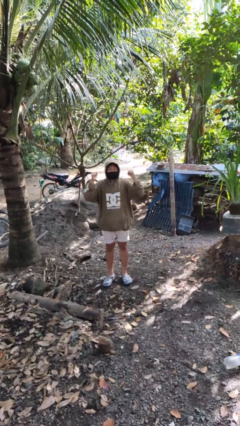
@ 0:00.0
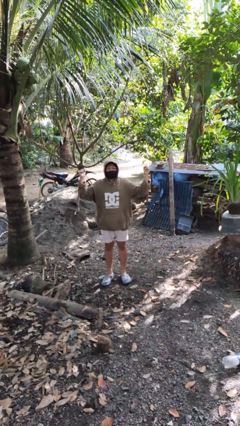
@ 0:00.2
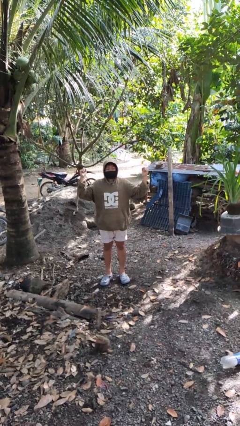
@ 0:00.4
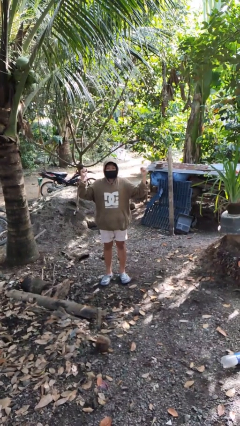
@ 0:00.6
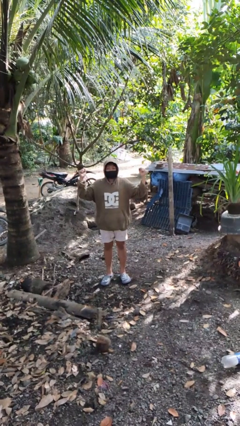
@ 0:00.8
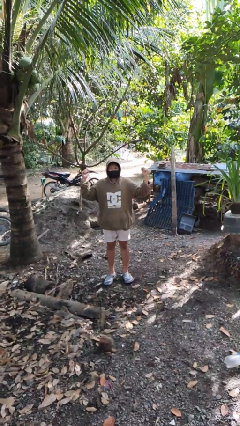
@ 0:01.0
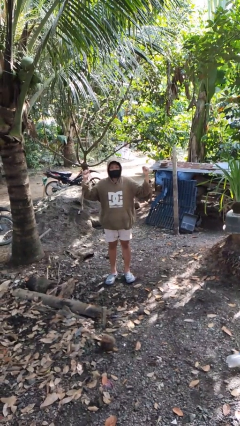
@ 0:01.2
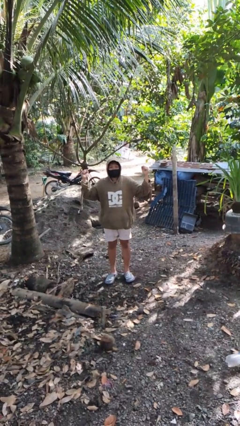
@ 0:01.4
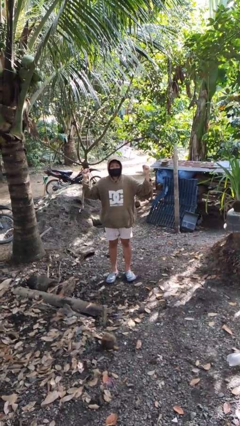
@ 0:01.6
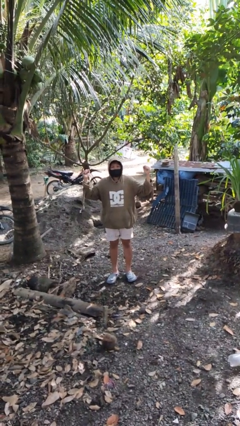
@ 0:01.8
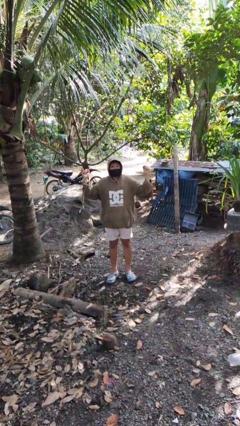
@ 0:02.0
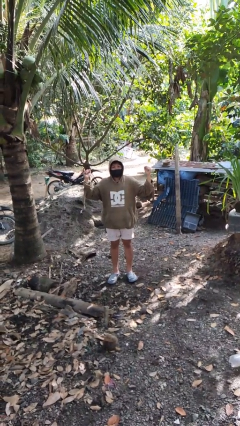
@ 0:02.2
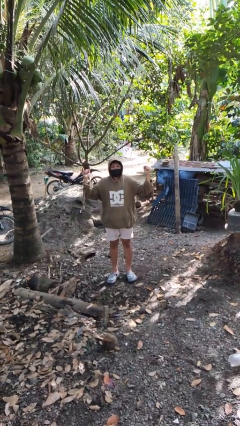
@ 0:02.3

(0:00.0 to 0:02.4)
person gestures zoom out

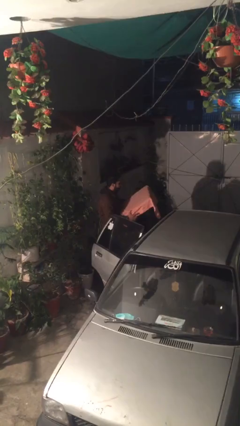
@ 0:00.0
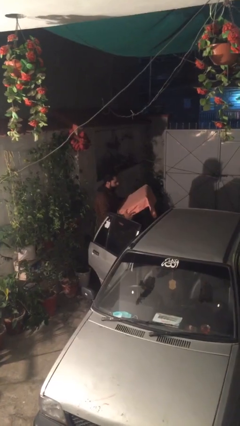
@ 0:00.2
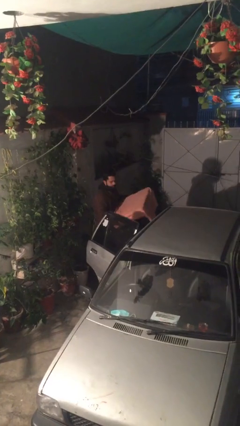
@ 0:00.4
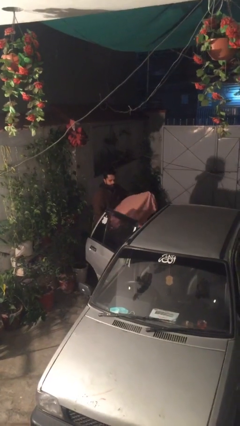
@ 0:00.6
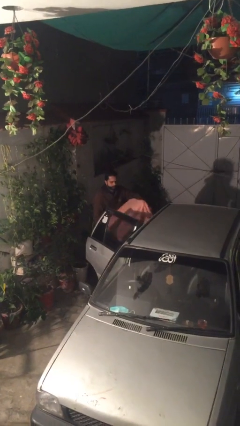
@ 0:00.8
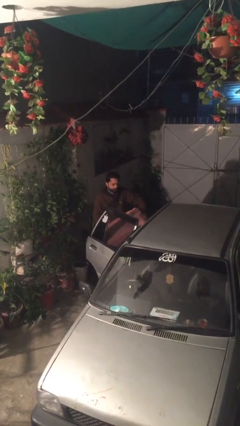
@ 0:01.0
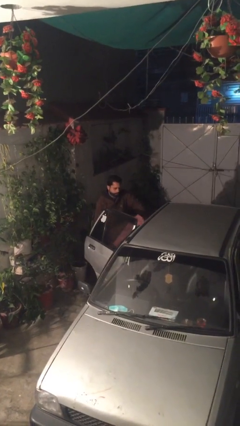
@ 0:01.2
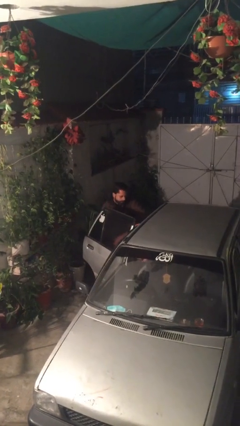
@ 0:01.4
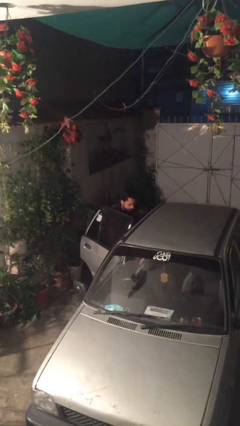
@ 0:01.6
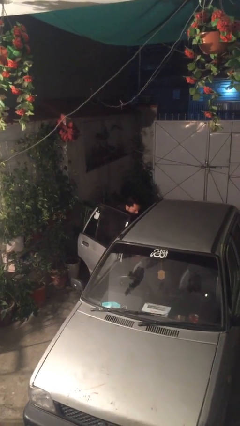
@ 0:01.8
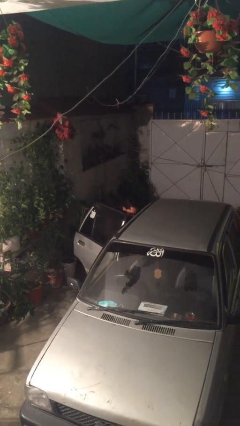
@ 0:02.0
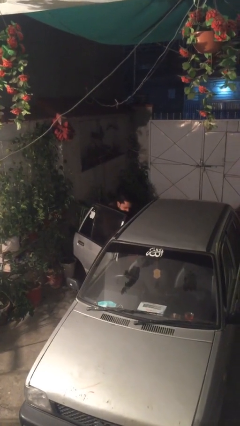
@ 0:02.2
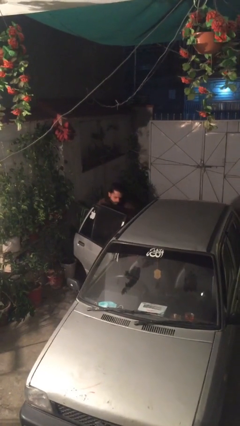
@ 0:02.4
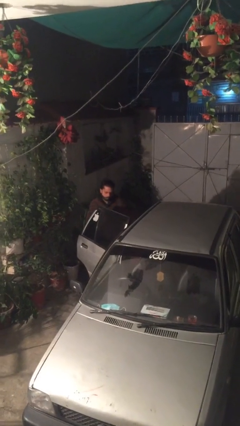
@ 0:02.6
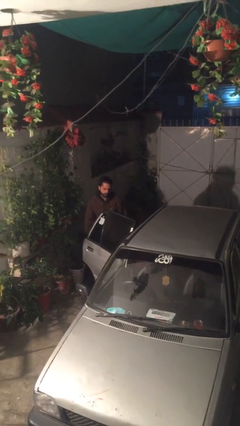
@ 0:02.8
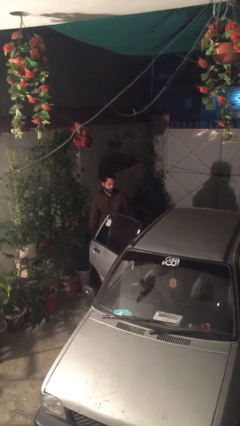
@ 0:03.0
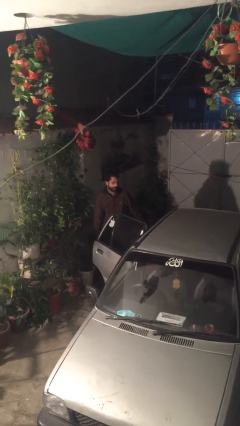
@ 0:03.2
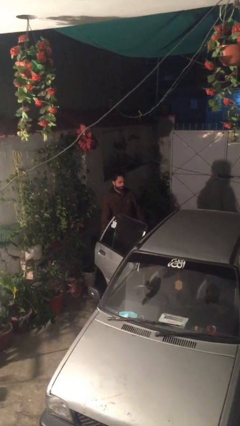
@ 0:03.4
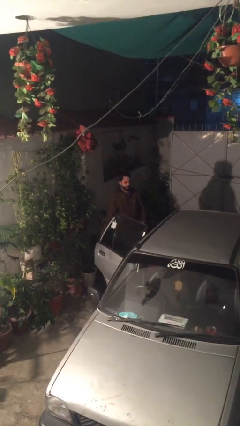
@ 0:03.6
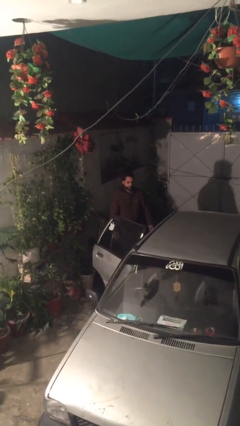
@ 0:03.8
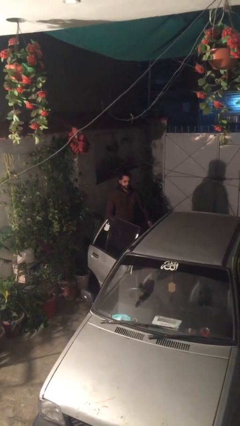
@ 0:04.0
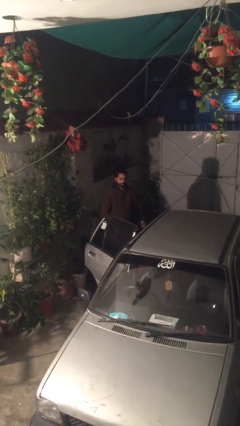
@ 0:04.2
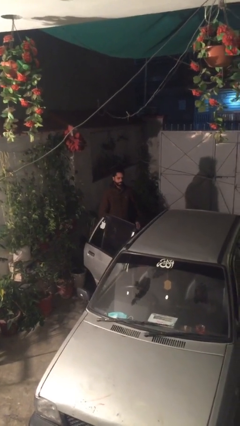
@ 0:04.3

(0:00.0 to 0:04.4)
person loads car

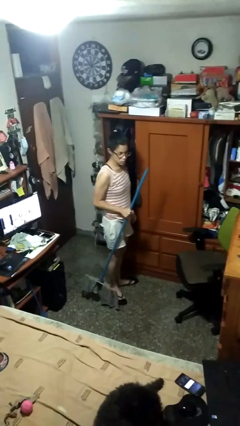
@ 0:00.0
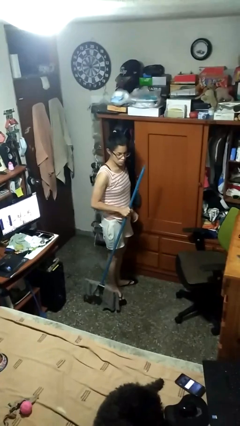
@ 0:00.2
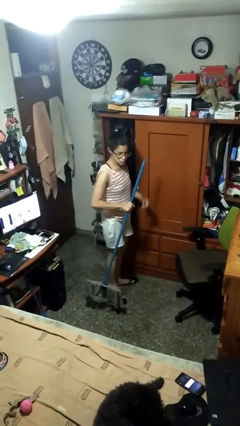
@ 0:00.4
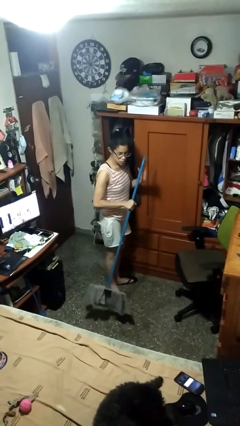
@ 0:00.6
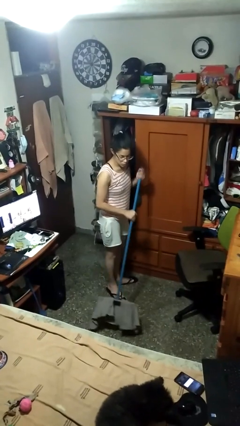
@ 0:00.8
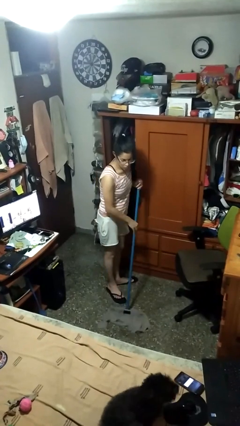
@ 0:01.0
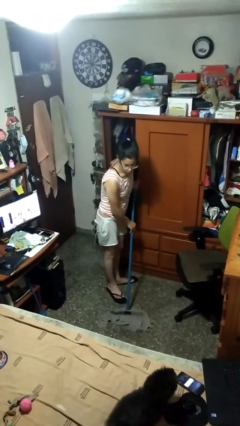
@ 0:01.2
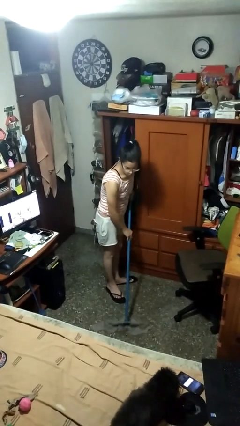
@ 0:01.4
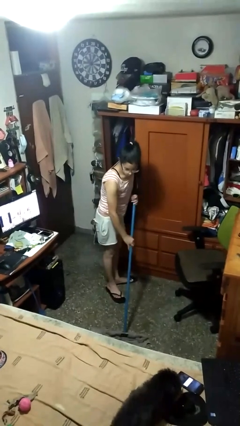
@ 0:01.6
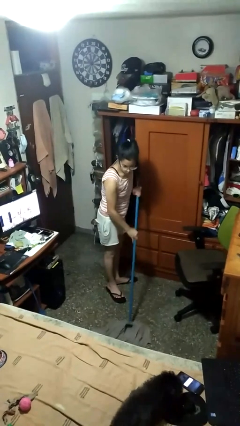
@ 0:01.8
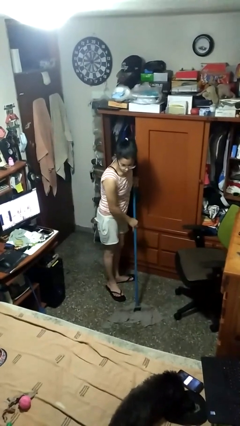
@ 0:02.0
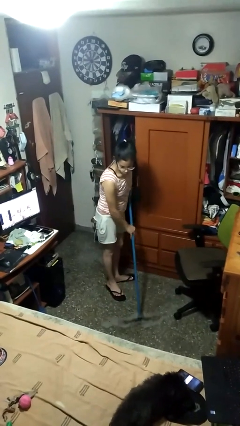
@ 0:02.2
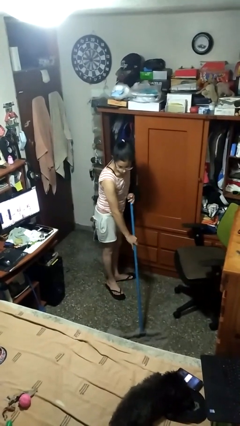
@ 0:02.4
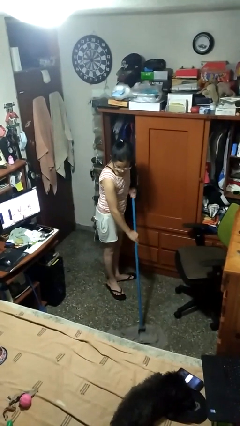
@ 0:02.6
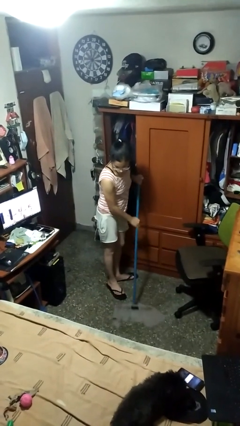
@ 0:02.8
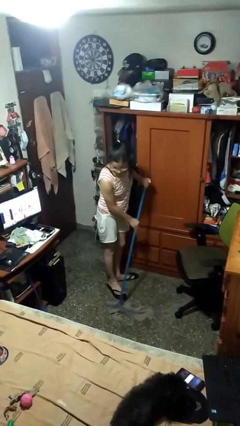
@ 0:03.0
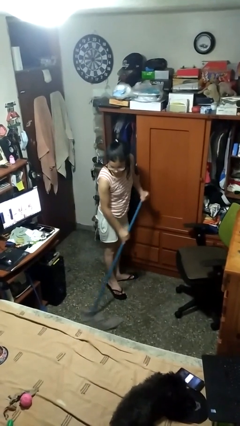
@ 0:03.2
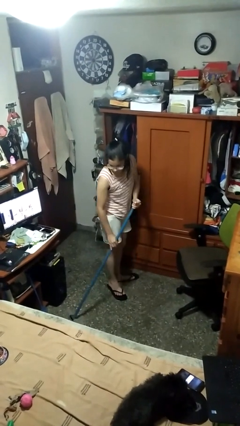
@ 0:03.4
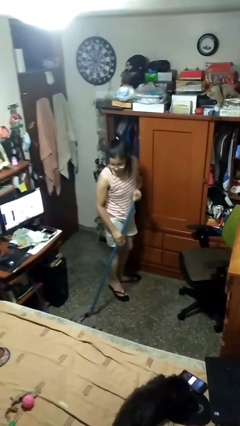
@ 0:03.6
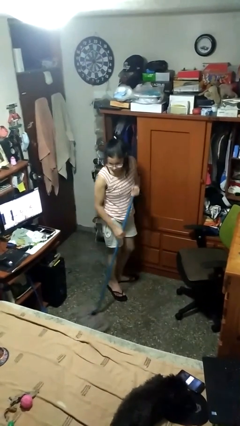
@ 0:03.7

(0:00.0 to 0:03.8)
person mops

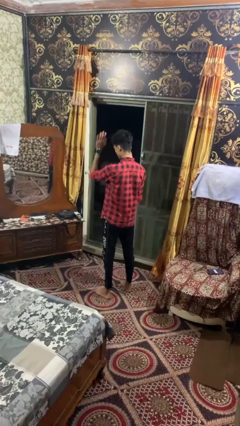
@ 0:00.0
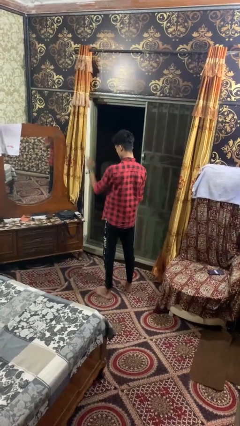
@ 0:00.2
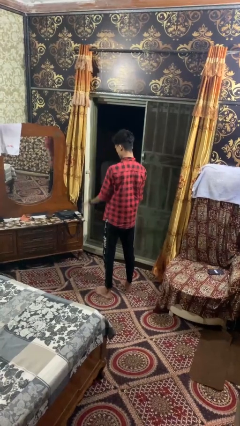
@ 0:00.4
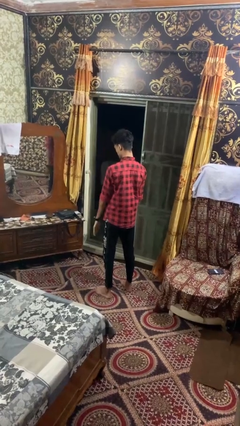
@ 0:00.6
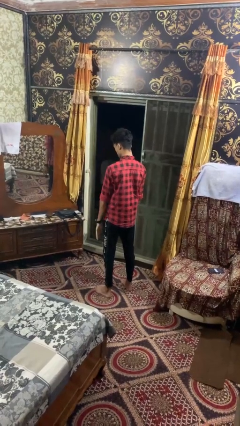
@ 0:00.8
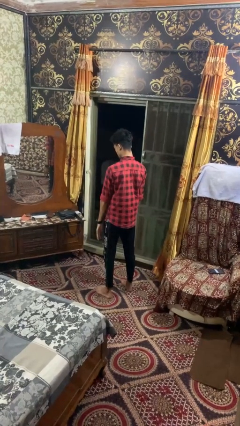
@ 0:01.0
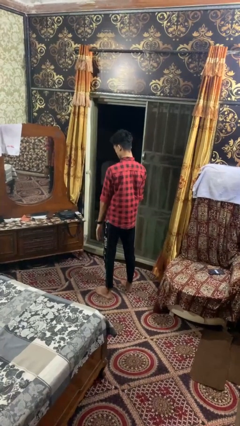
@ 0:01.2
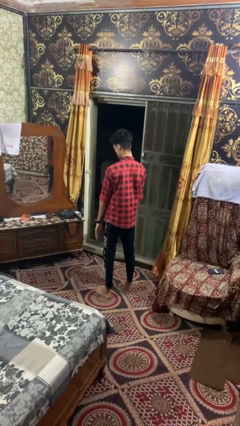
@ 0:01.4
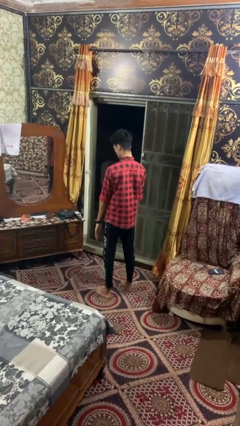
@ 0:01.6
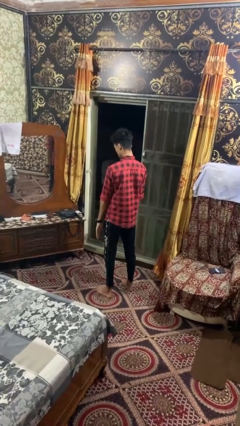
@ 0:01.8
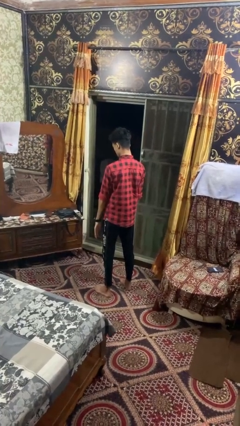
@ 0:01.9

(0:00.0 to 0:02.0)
person gestures lower hand

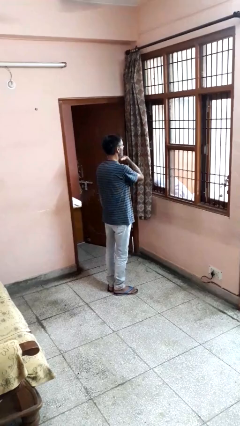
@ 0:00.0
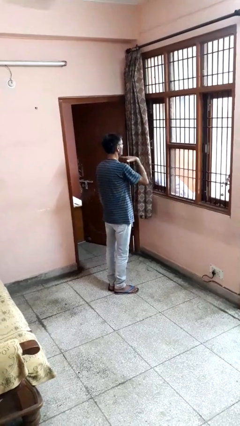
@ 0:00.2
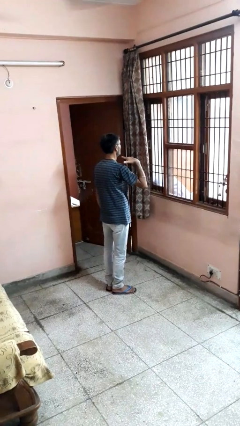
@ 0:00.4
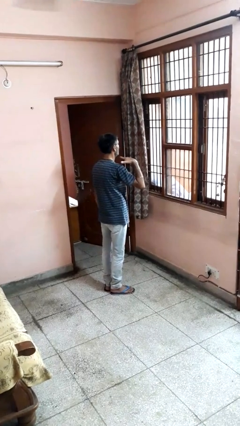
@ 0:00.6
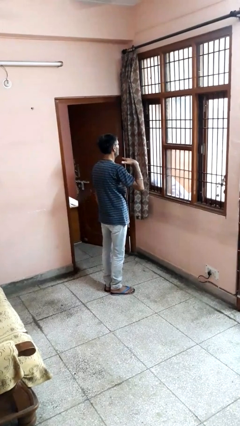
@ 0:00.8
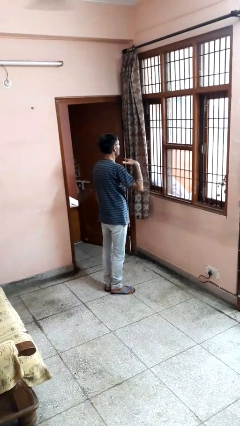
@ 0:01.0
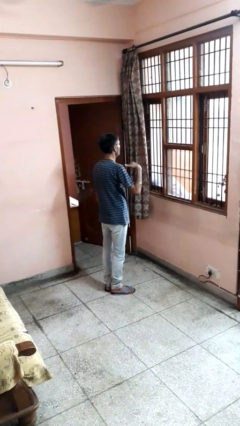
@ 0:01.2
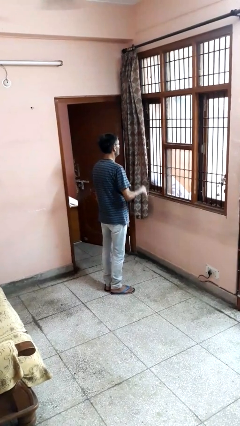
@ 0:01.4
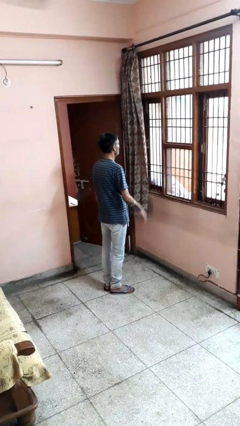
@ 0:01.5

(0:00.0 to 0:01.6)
person gestures cut

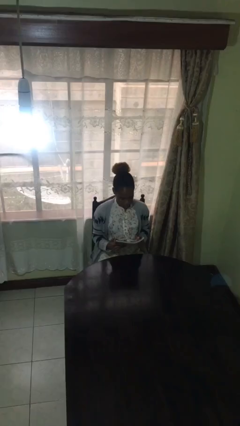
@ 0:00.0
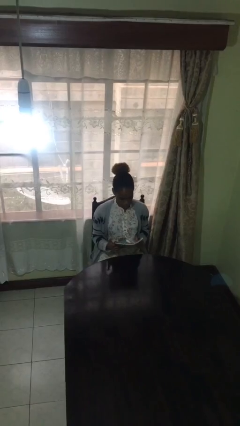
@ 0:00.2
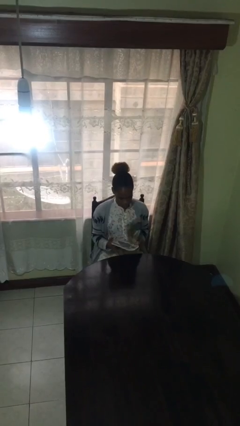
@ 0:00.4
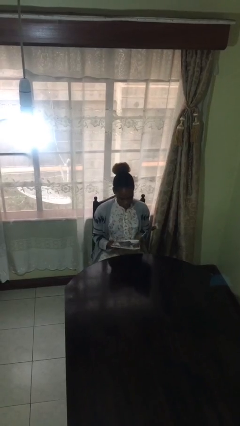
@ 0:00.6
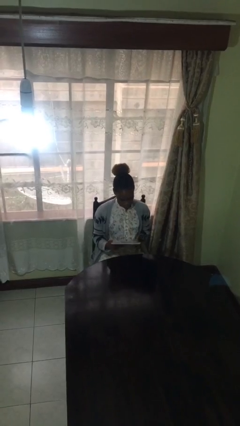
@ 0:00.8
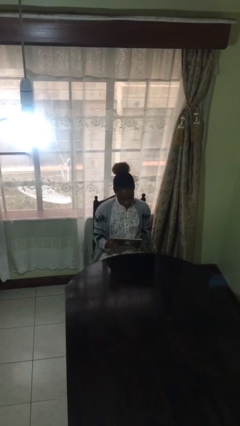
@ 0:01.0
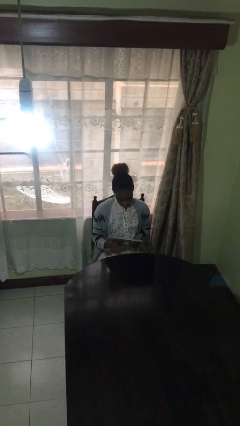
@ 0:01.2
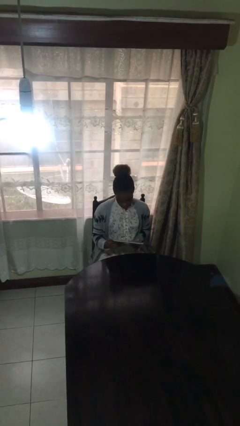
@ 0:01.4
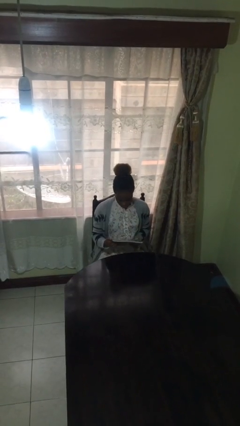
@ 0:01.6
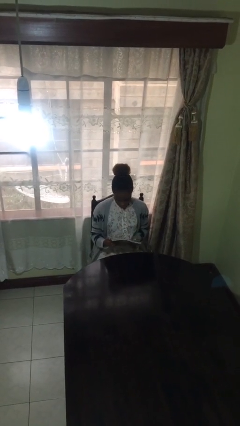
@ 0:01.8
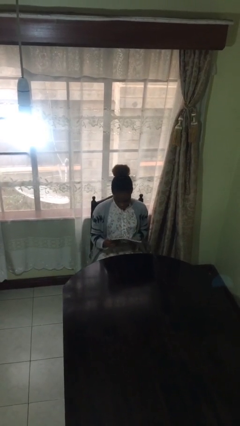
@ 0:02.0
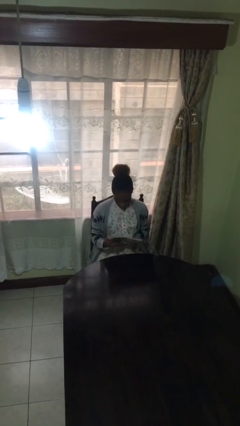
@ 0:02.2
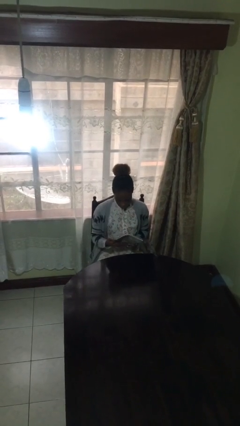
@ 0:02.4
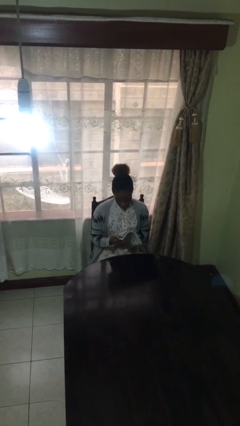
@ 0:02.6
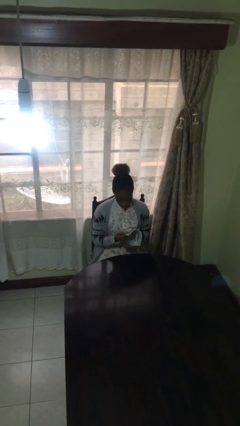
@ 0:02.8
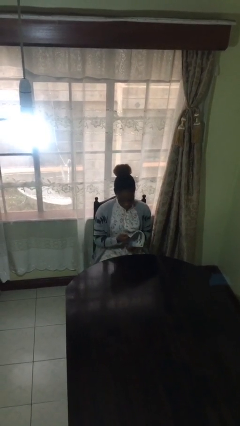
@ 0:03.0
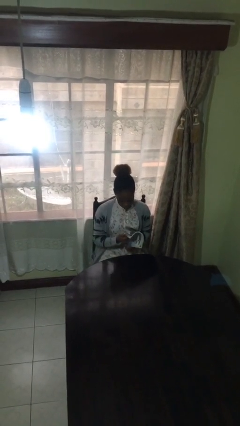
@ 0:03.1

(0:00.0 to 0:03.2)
person reads document
